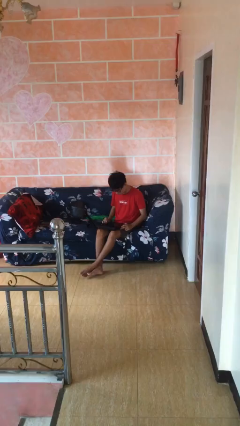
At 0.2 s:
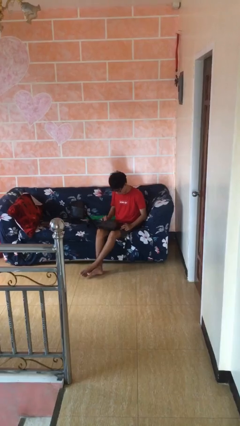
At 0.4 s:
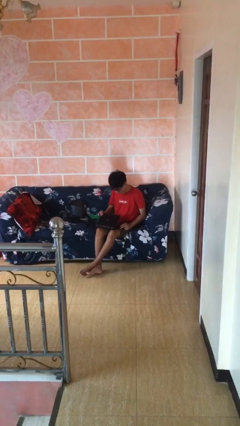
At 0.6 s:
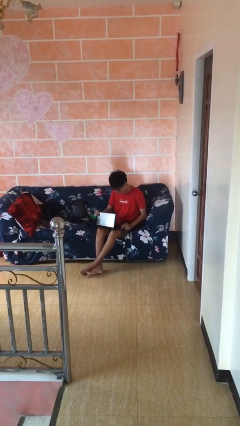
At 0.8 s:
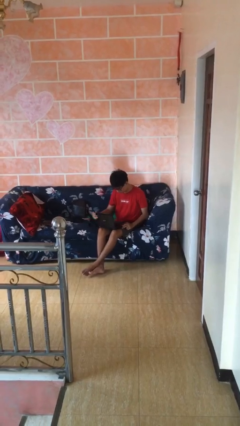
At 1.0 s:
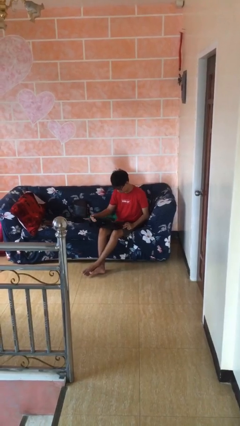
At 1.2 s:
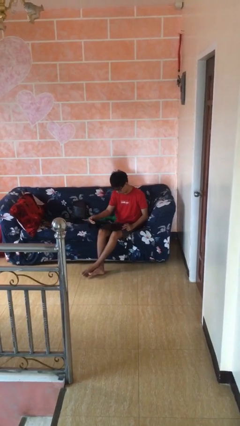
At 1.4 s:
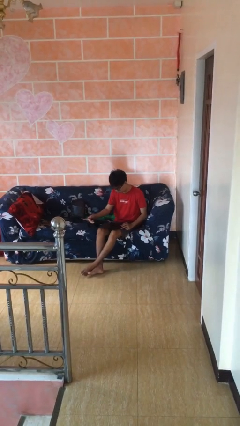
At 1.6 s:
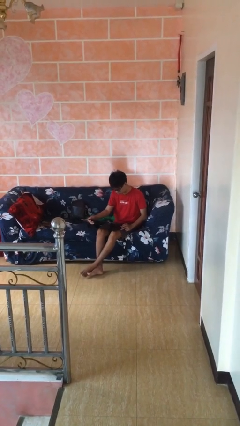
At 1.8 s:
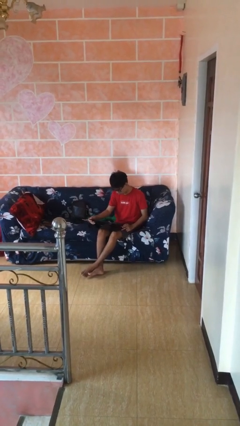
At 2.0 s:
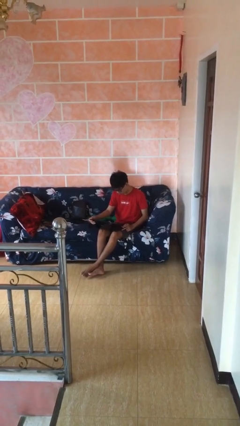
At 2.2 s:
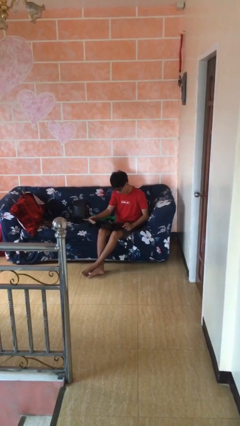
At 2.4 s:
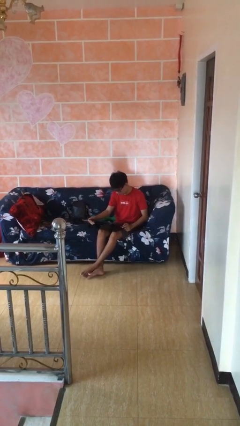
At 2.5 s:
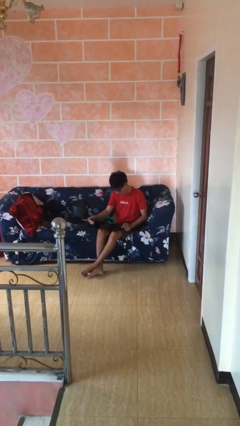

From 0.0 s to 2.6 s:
person interacts with laptop

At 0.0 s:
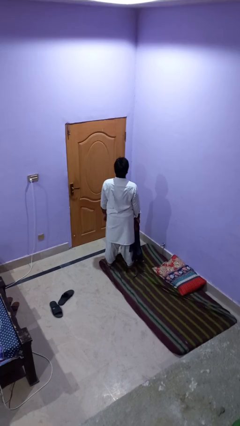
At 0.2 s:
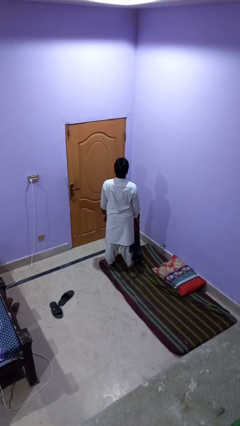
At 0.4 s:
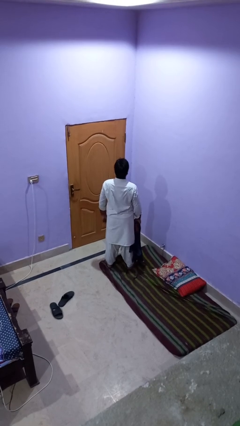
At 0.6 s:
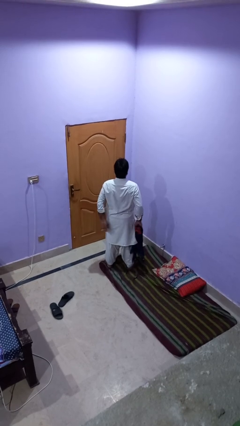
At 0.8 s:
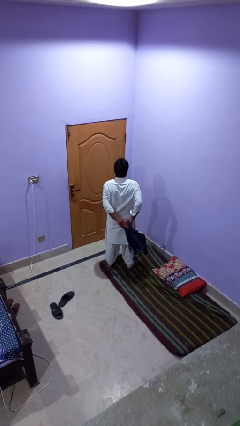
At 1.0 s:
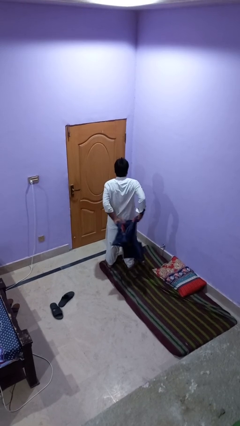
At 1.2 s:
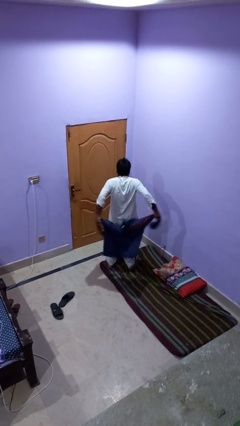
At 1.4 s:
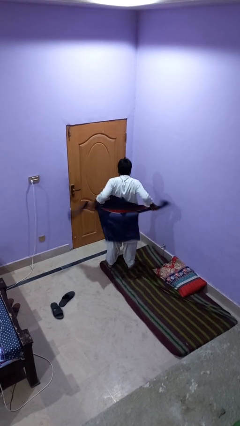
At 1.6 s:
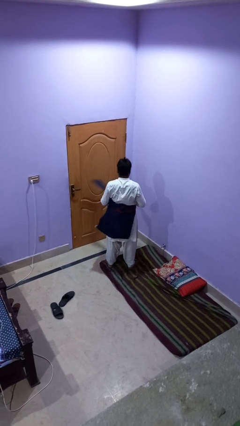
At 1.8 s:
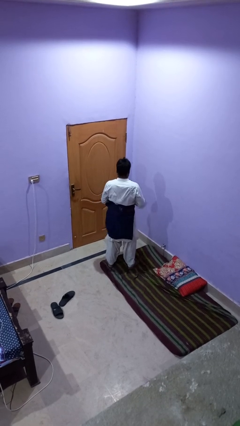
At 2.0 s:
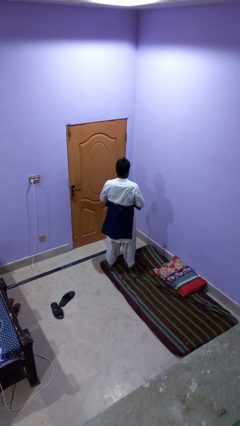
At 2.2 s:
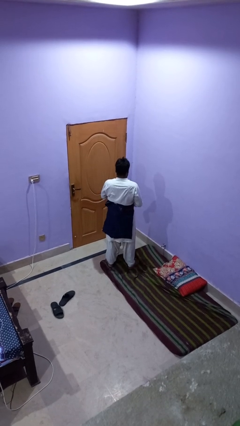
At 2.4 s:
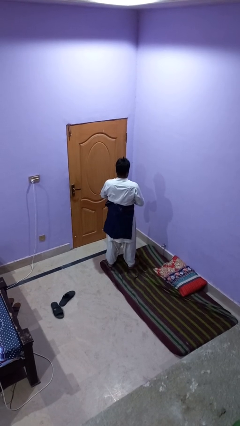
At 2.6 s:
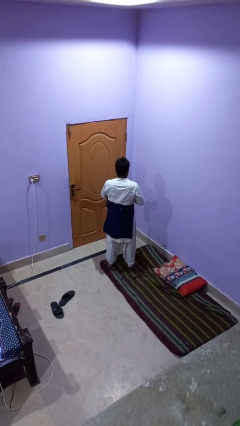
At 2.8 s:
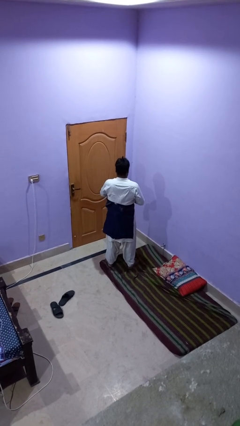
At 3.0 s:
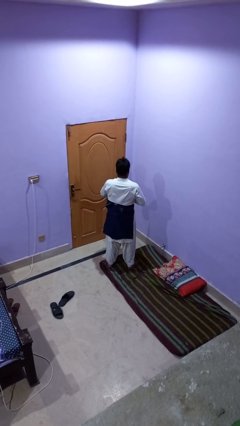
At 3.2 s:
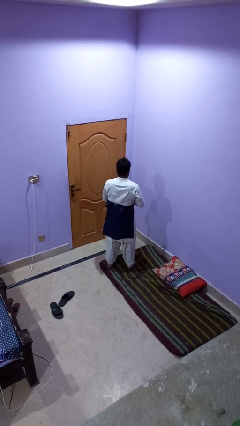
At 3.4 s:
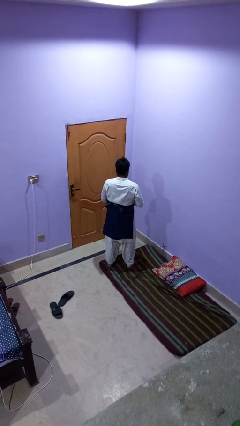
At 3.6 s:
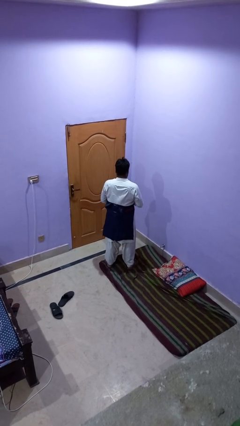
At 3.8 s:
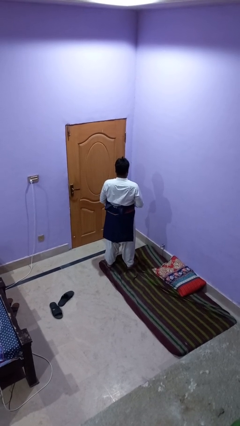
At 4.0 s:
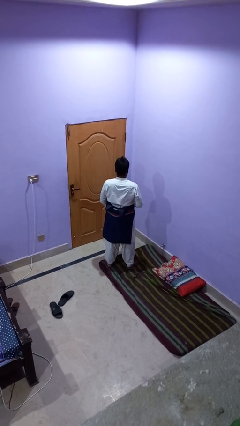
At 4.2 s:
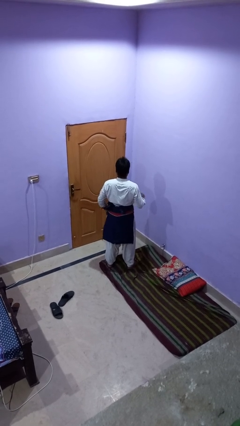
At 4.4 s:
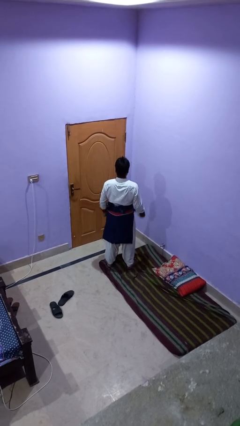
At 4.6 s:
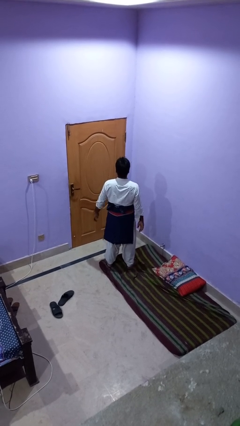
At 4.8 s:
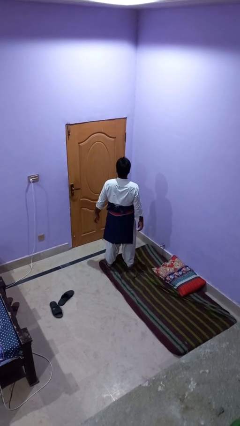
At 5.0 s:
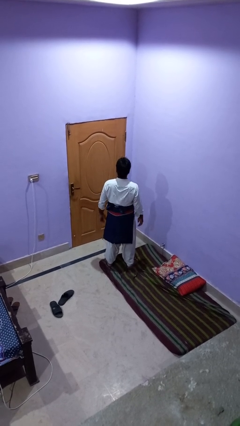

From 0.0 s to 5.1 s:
person ties jacket around waist

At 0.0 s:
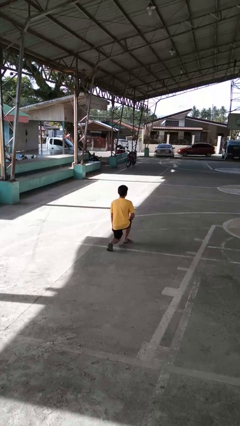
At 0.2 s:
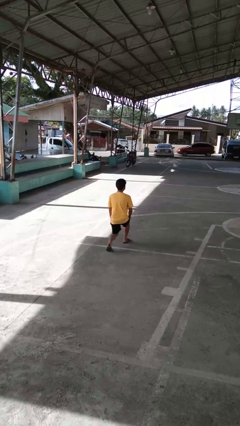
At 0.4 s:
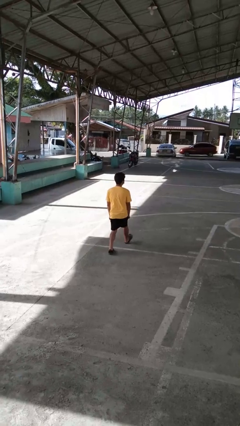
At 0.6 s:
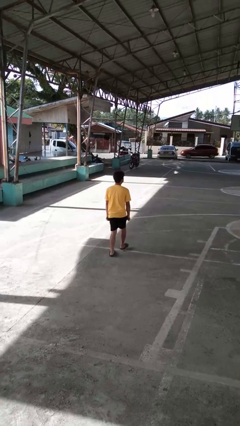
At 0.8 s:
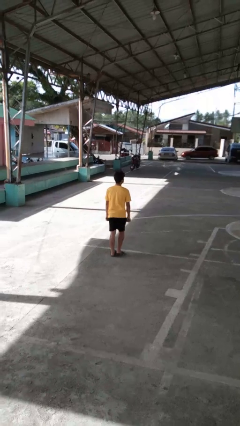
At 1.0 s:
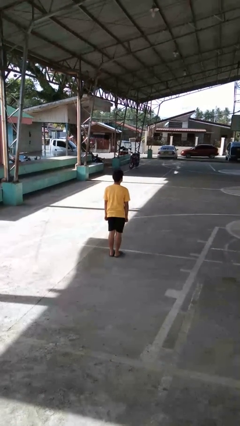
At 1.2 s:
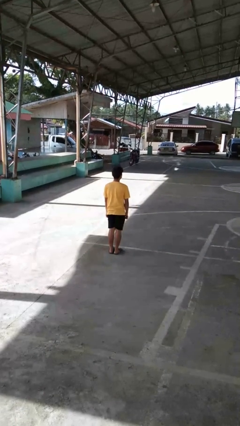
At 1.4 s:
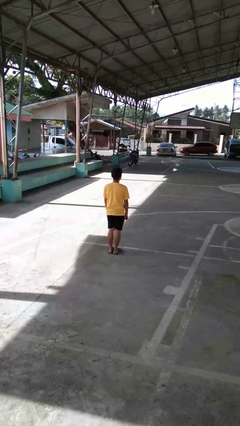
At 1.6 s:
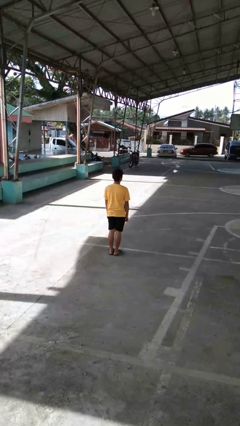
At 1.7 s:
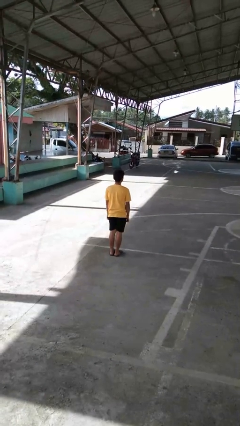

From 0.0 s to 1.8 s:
person stands up from floor

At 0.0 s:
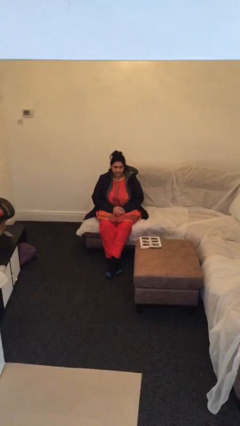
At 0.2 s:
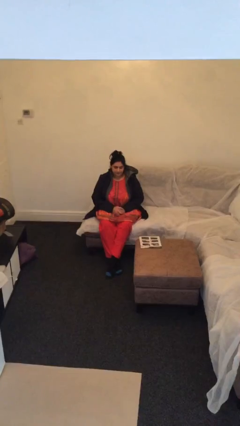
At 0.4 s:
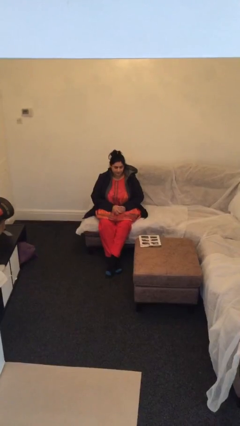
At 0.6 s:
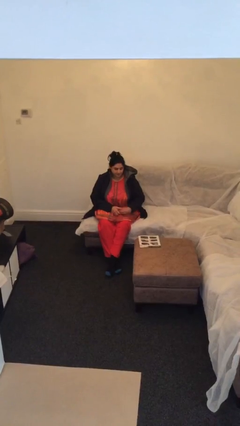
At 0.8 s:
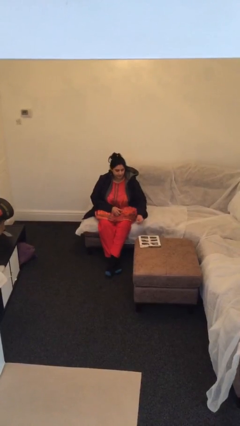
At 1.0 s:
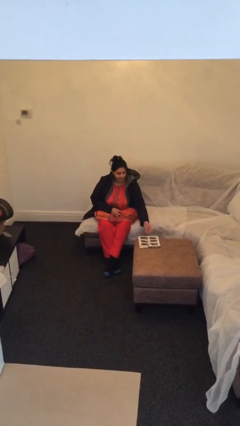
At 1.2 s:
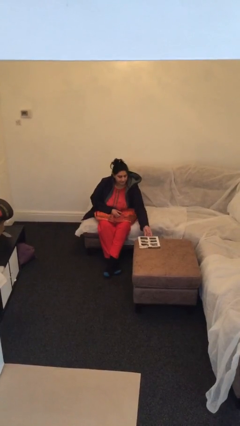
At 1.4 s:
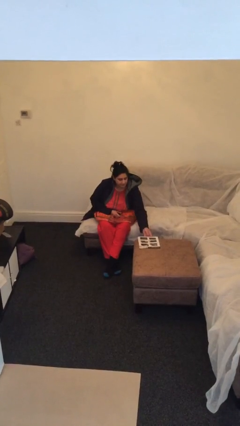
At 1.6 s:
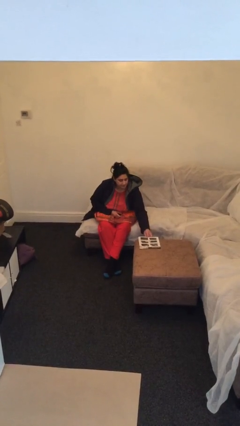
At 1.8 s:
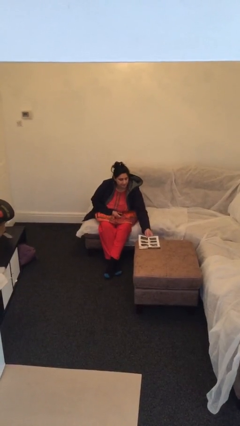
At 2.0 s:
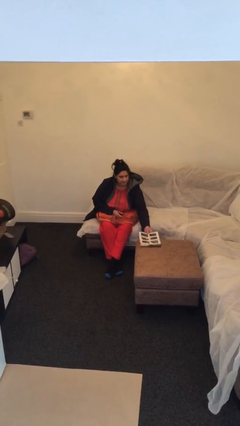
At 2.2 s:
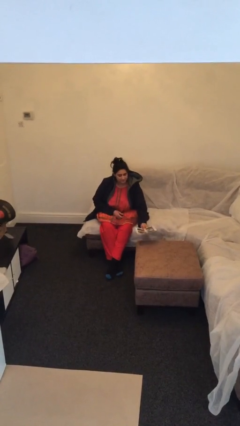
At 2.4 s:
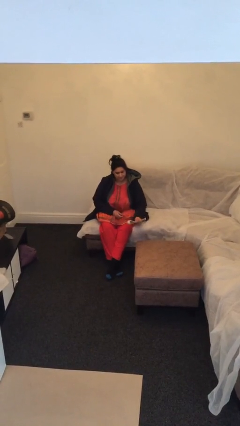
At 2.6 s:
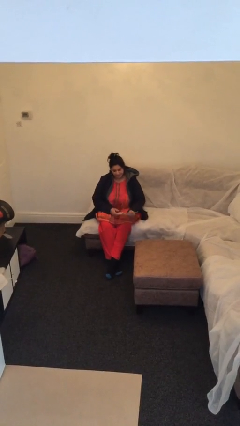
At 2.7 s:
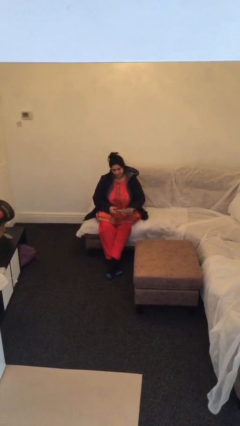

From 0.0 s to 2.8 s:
person picks up object from table

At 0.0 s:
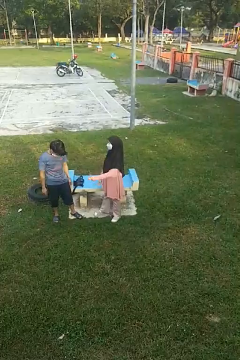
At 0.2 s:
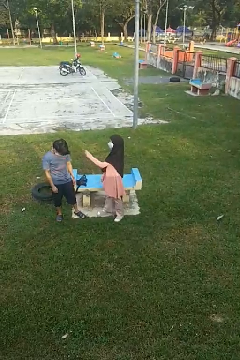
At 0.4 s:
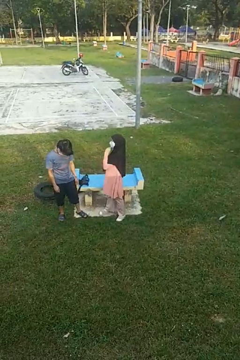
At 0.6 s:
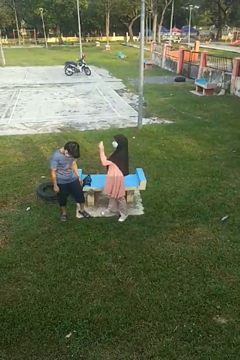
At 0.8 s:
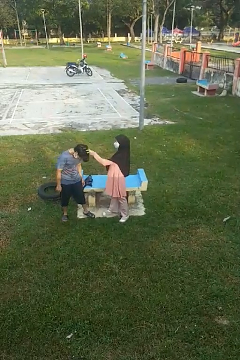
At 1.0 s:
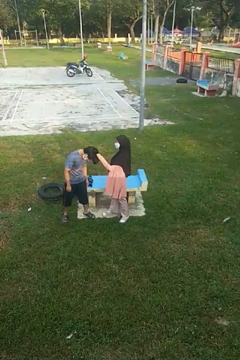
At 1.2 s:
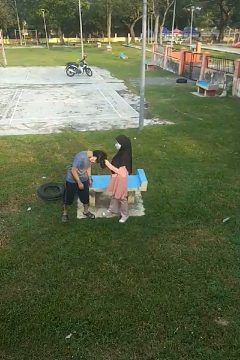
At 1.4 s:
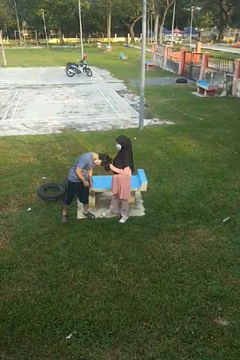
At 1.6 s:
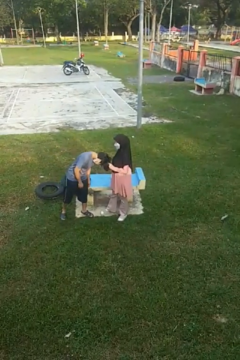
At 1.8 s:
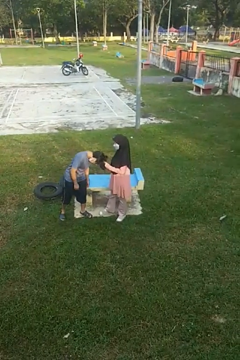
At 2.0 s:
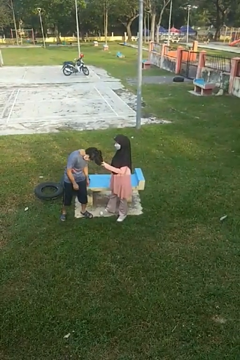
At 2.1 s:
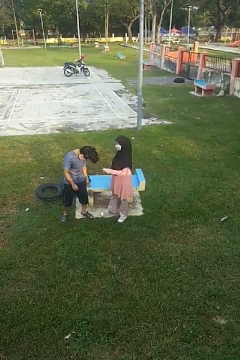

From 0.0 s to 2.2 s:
person grabs person by hair

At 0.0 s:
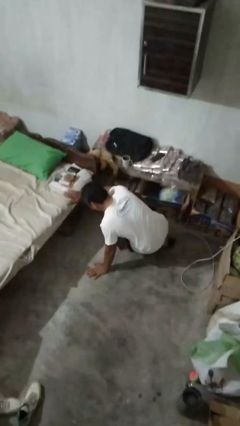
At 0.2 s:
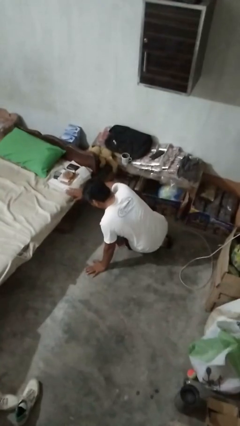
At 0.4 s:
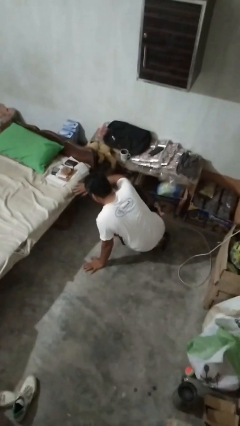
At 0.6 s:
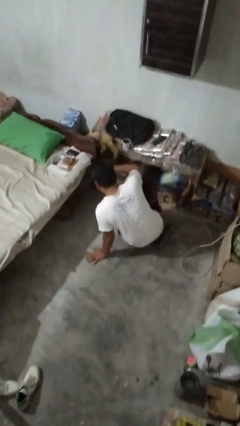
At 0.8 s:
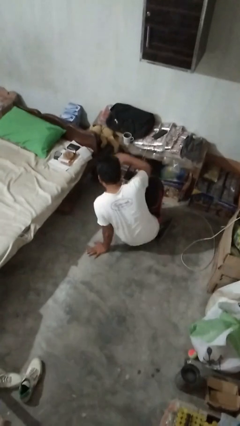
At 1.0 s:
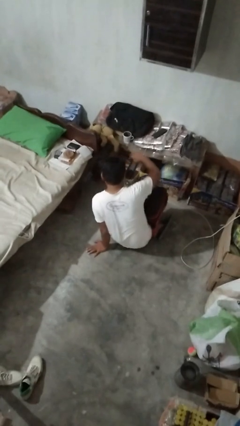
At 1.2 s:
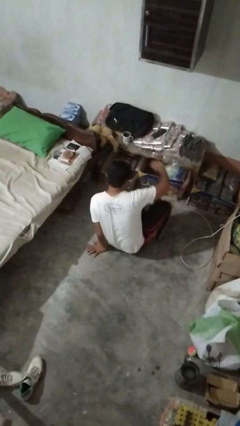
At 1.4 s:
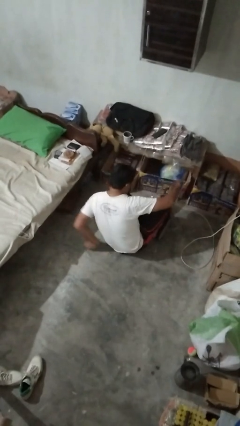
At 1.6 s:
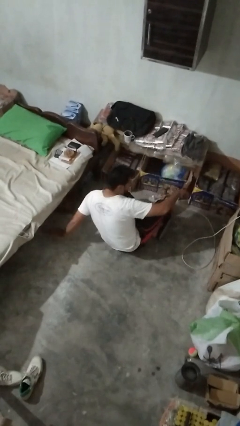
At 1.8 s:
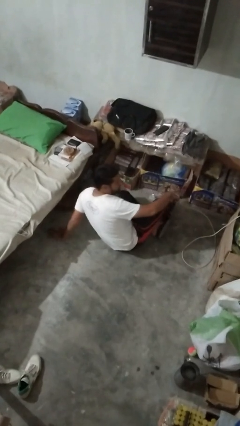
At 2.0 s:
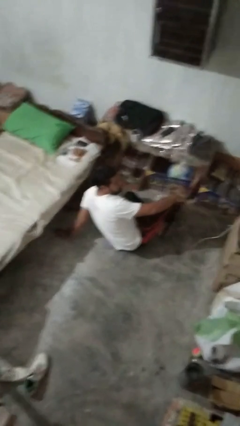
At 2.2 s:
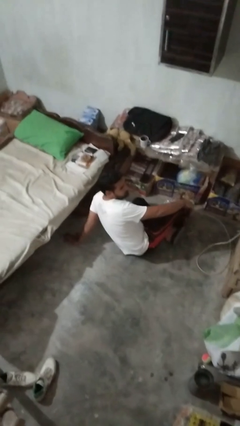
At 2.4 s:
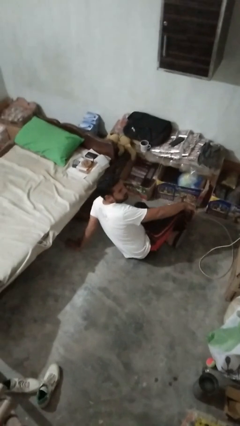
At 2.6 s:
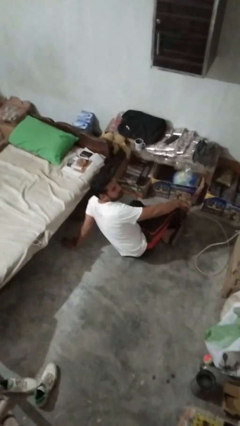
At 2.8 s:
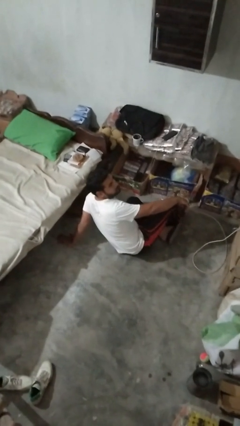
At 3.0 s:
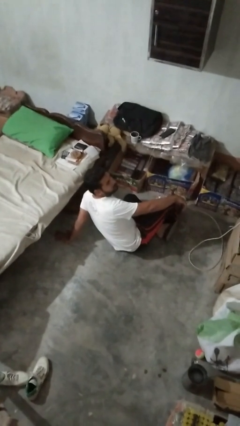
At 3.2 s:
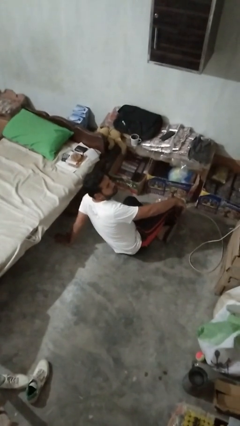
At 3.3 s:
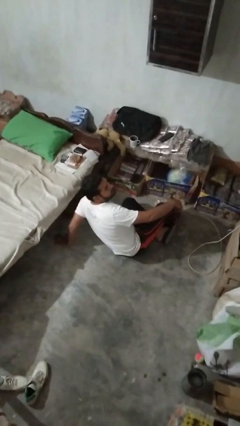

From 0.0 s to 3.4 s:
person lies down on floor
